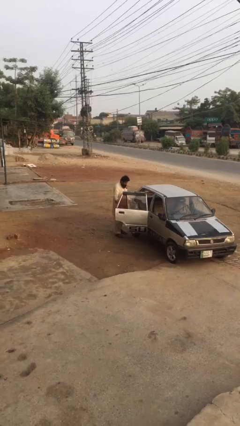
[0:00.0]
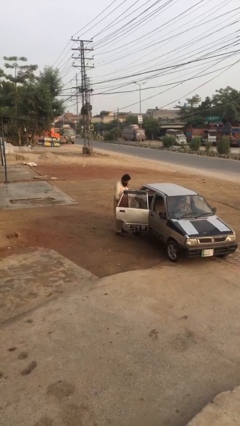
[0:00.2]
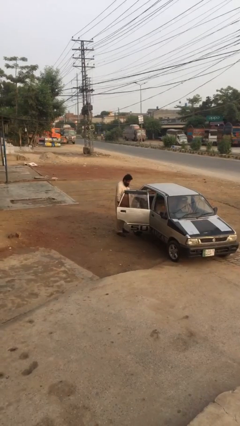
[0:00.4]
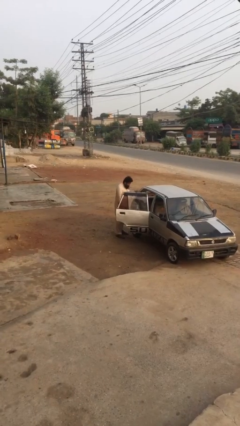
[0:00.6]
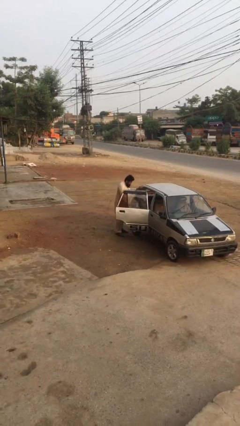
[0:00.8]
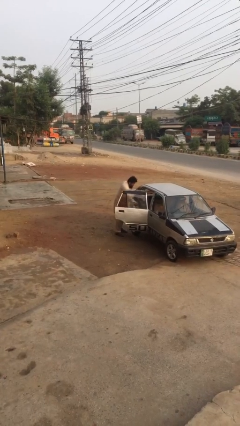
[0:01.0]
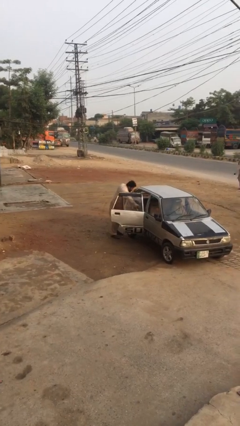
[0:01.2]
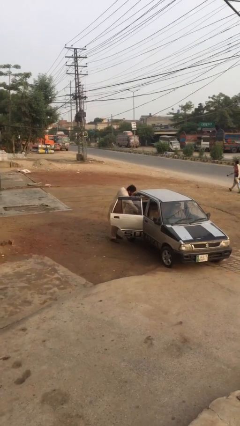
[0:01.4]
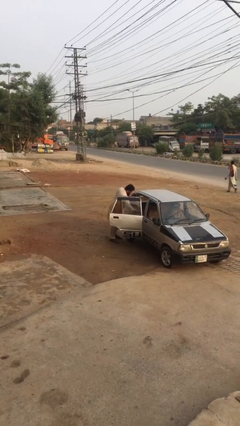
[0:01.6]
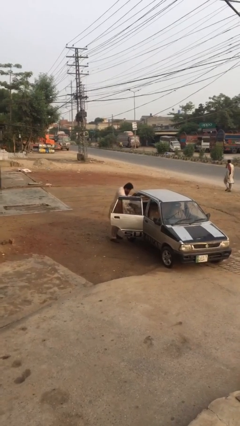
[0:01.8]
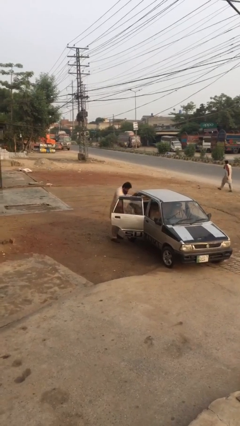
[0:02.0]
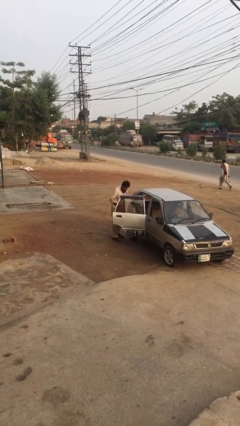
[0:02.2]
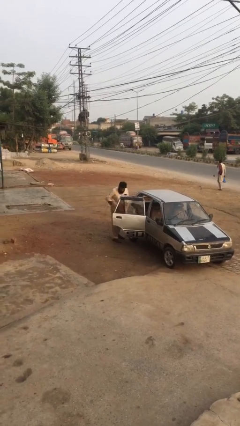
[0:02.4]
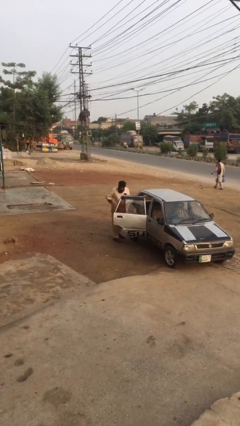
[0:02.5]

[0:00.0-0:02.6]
person unloads car

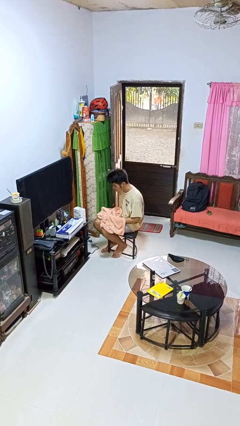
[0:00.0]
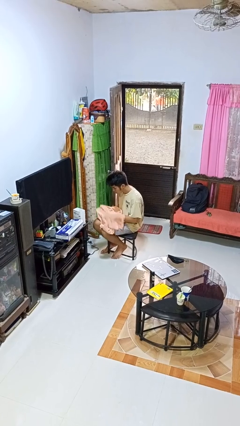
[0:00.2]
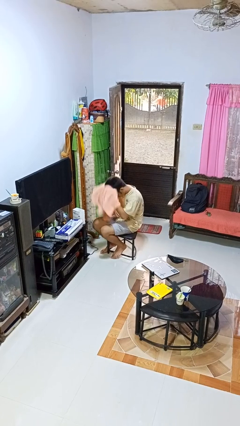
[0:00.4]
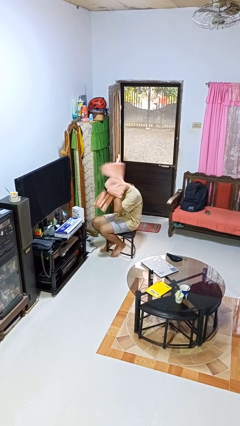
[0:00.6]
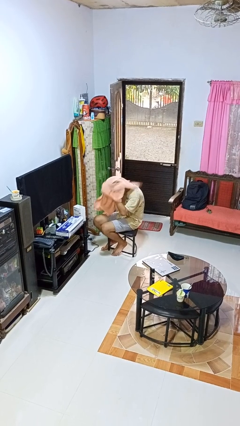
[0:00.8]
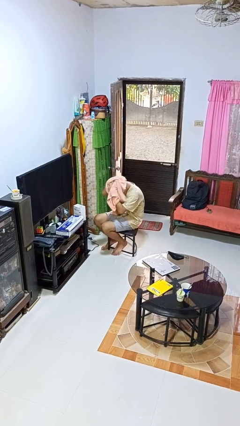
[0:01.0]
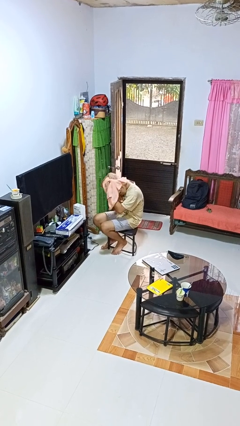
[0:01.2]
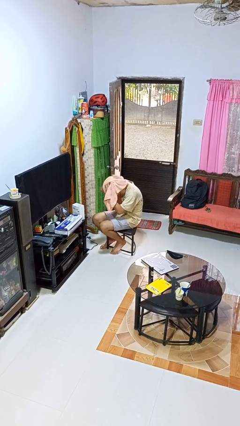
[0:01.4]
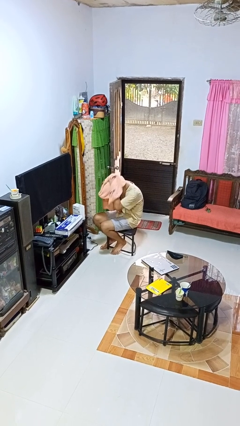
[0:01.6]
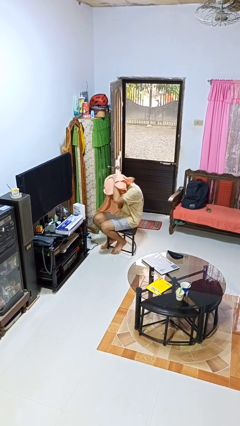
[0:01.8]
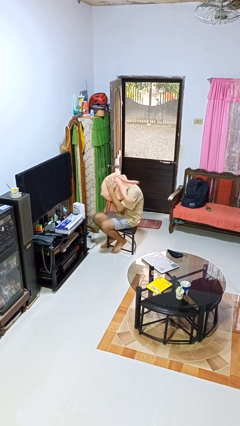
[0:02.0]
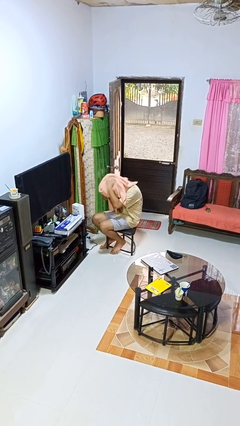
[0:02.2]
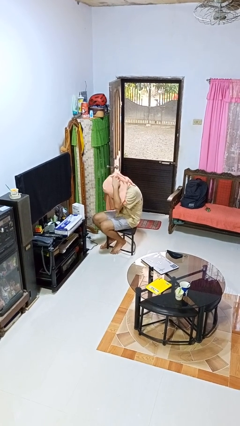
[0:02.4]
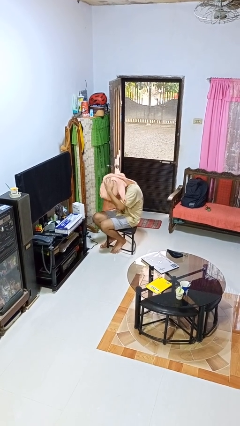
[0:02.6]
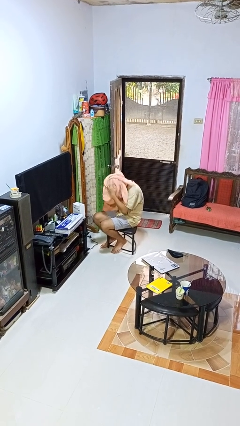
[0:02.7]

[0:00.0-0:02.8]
person dries hair with towel

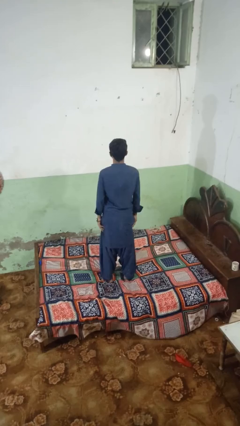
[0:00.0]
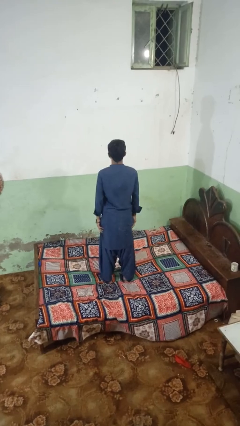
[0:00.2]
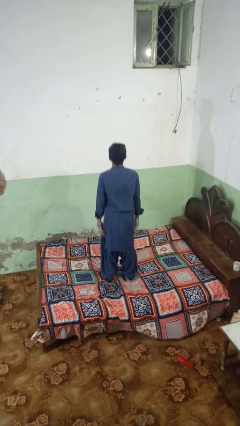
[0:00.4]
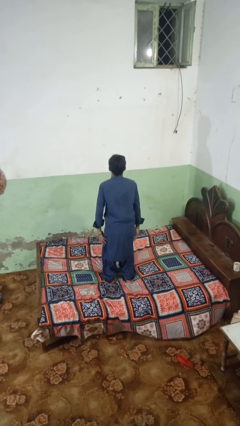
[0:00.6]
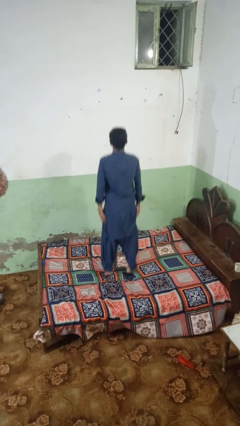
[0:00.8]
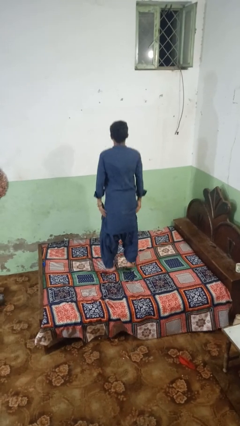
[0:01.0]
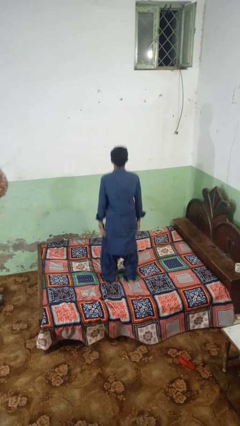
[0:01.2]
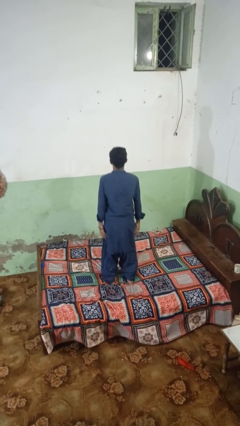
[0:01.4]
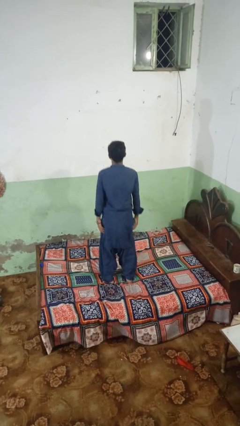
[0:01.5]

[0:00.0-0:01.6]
person jumps on bed

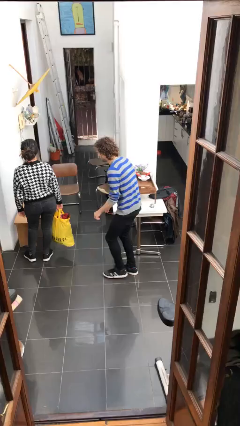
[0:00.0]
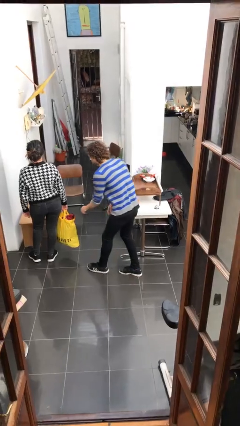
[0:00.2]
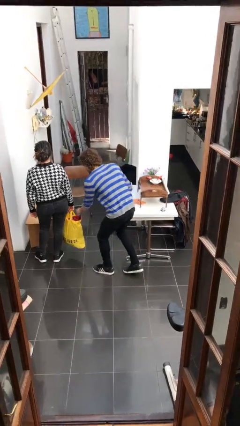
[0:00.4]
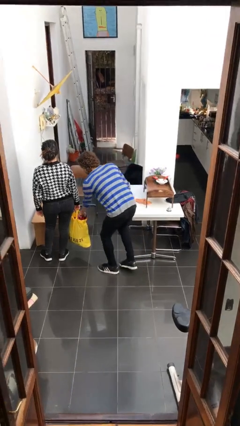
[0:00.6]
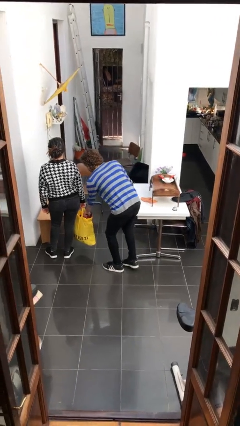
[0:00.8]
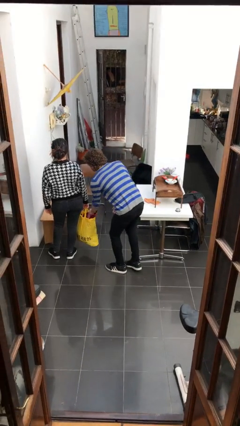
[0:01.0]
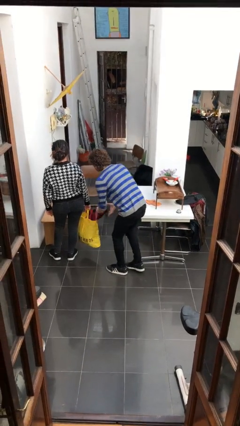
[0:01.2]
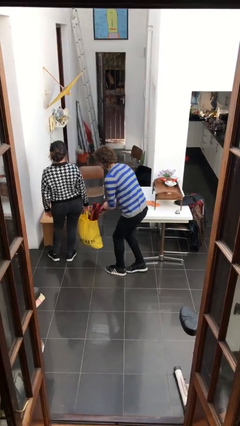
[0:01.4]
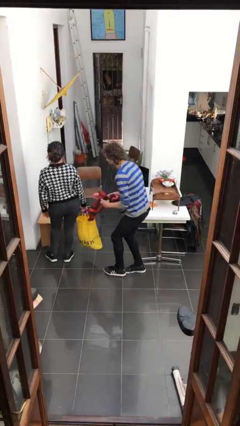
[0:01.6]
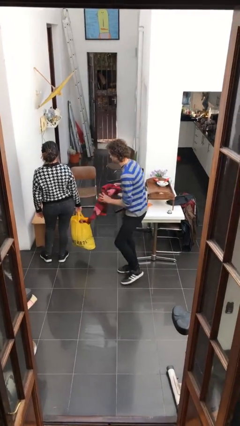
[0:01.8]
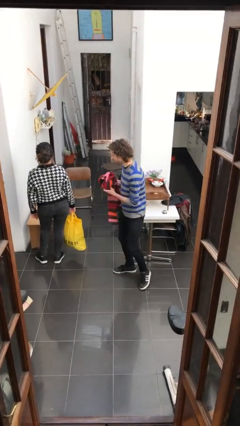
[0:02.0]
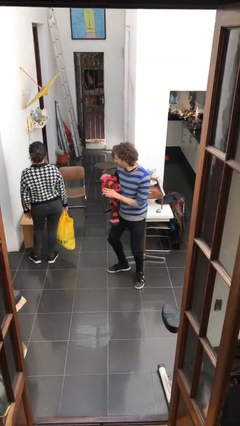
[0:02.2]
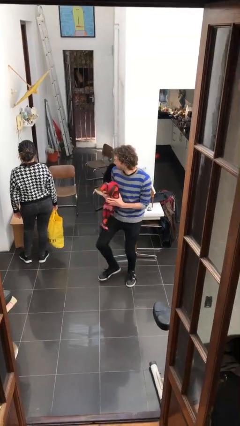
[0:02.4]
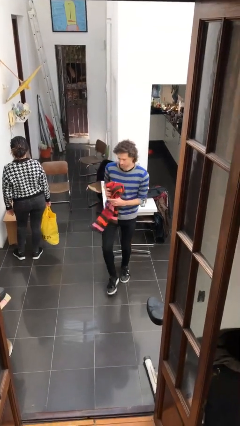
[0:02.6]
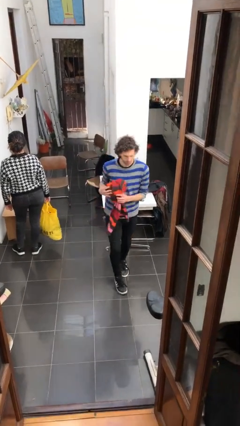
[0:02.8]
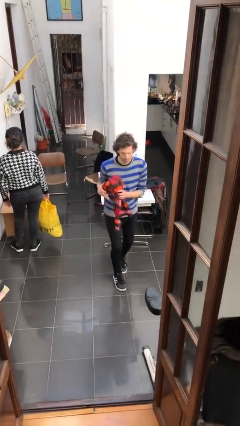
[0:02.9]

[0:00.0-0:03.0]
person steals object from person

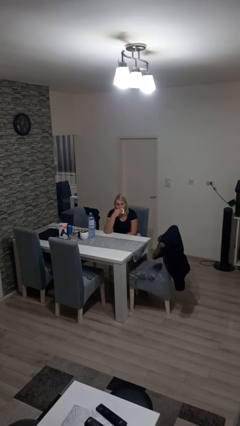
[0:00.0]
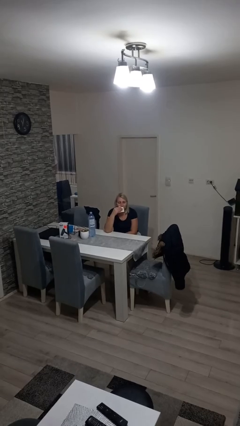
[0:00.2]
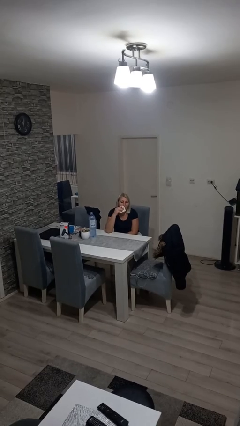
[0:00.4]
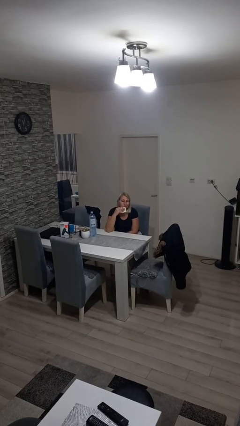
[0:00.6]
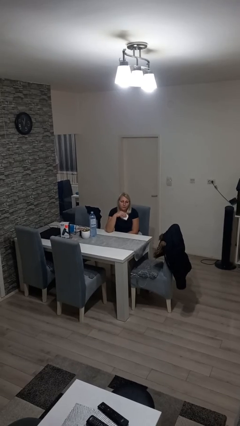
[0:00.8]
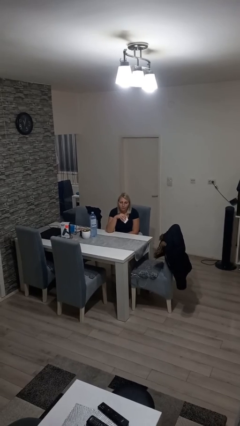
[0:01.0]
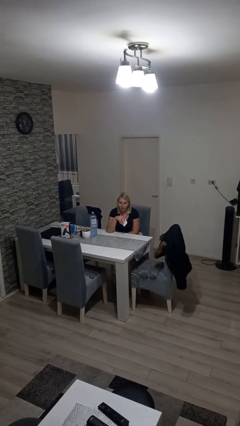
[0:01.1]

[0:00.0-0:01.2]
person wipes mouth with napkin

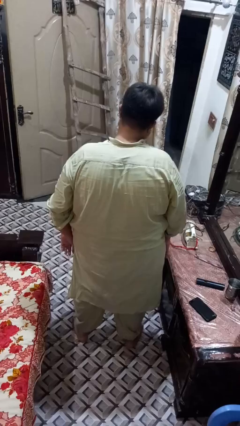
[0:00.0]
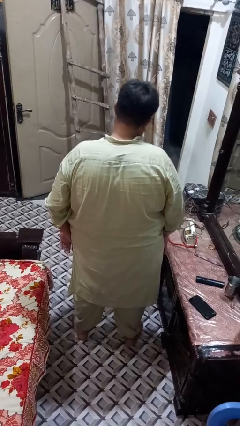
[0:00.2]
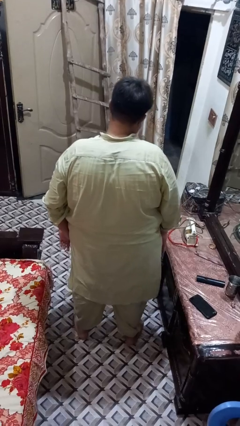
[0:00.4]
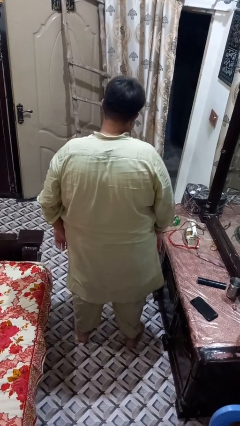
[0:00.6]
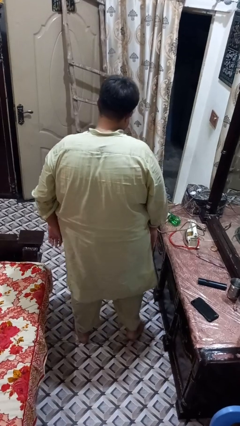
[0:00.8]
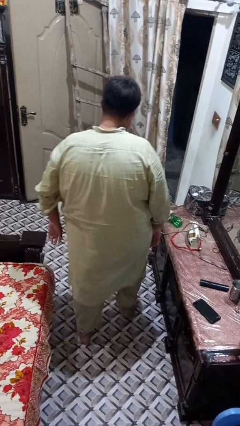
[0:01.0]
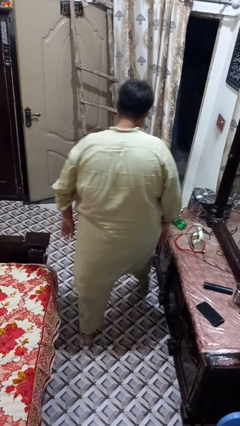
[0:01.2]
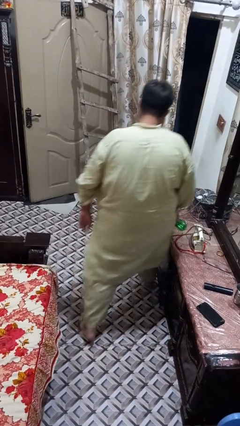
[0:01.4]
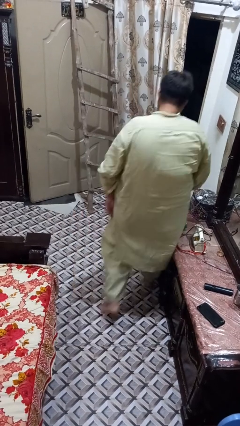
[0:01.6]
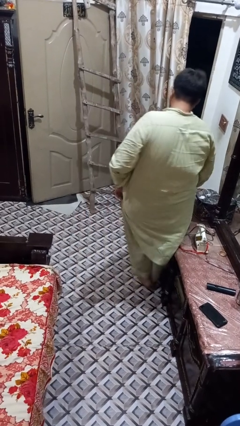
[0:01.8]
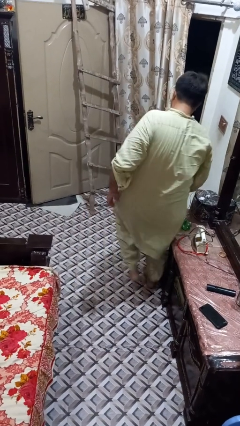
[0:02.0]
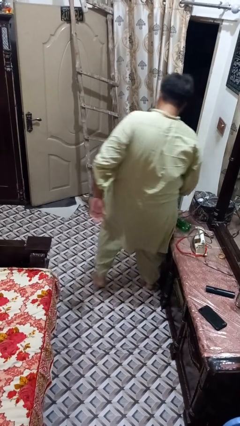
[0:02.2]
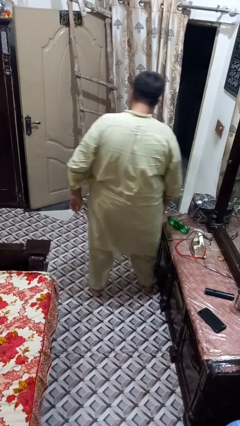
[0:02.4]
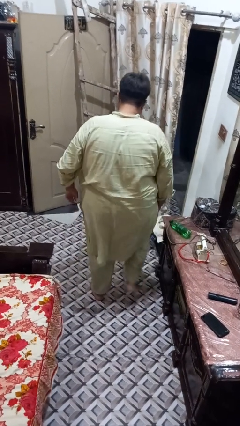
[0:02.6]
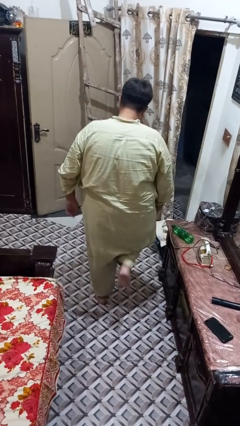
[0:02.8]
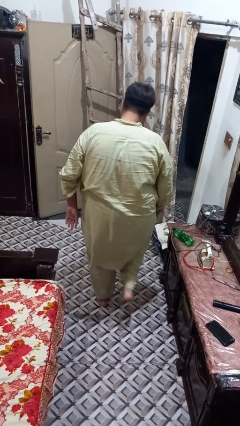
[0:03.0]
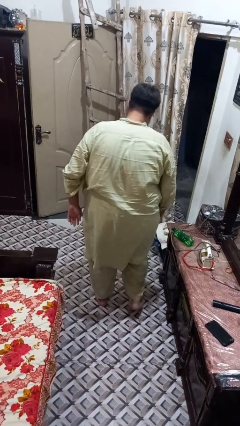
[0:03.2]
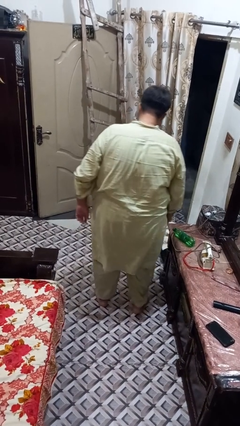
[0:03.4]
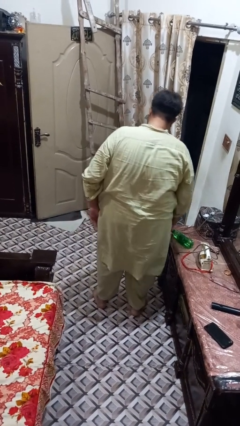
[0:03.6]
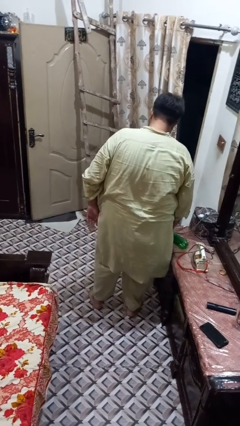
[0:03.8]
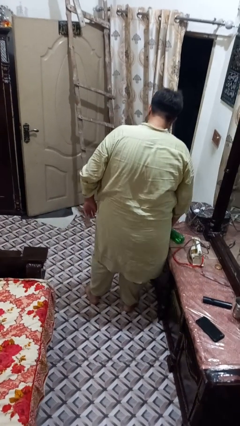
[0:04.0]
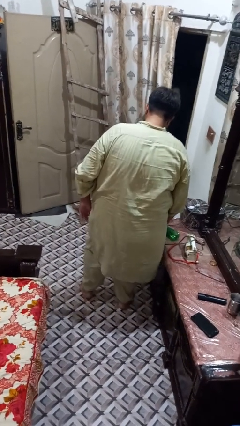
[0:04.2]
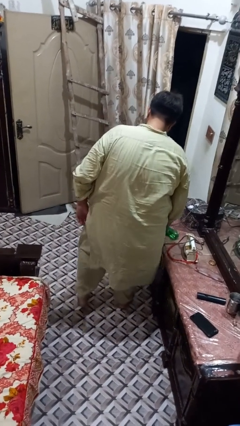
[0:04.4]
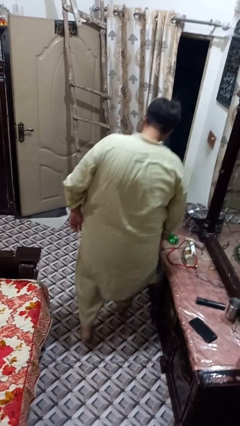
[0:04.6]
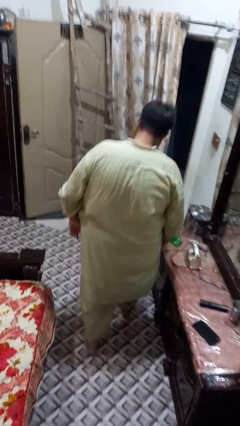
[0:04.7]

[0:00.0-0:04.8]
person bumps into table

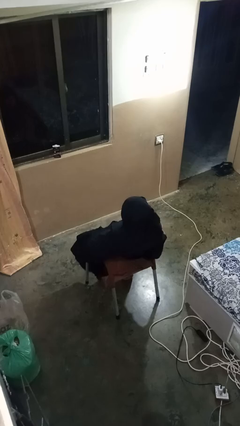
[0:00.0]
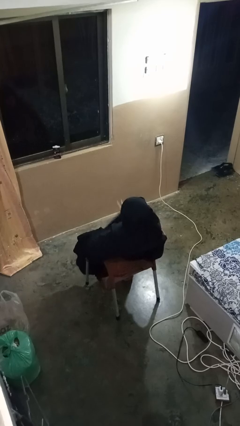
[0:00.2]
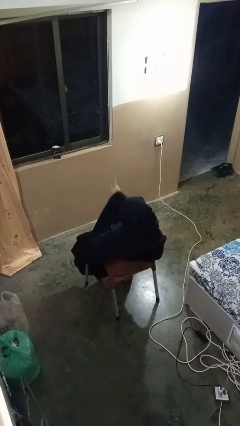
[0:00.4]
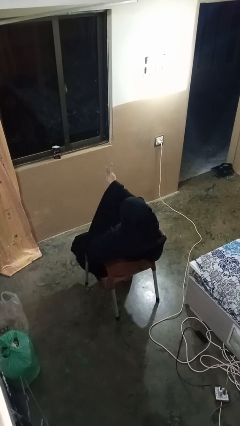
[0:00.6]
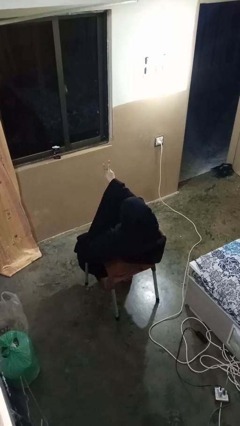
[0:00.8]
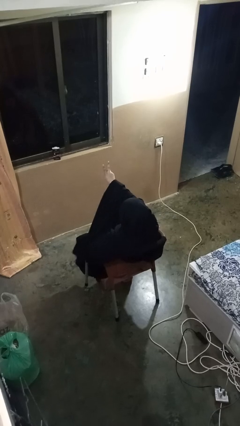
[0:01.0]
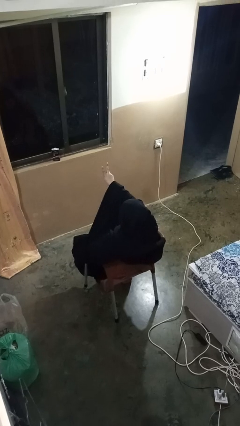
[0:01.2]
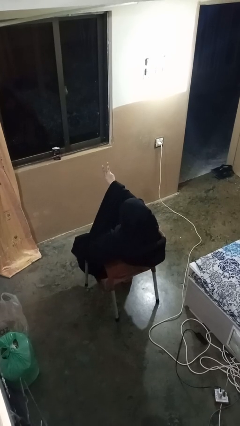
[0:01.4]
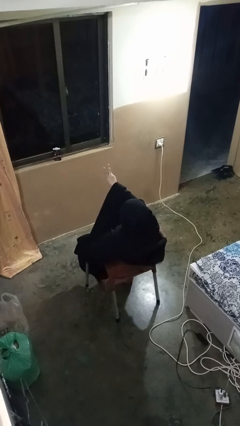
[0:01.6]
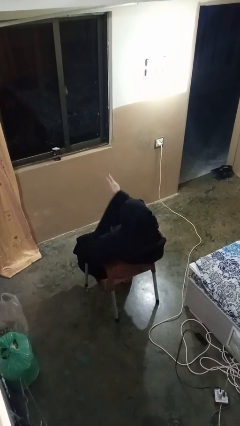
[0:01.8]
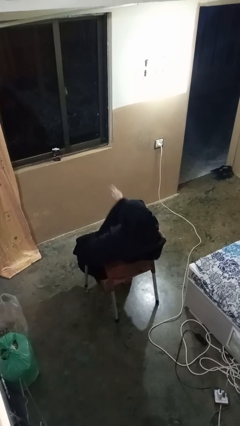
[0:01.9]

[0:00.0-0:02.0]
person gestures peace
